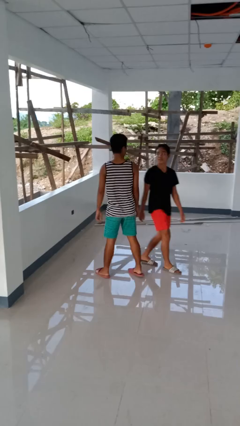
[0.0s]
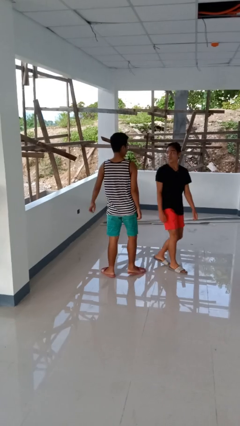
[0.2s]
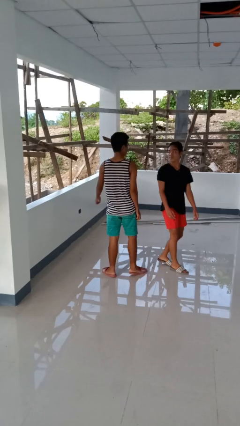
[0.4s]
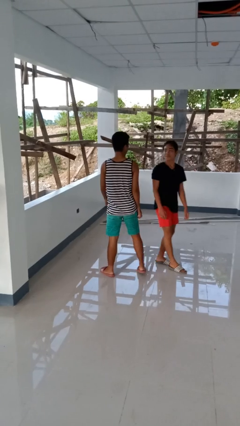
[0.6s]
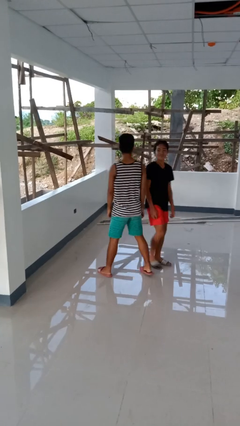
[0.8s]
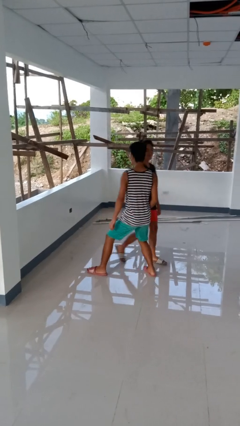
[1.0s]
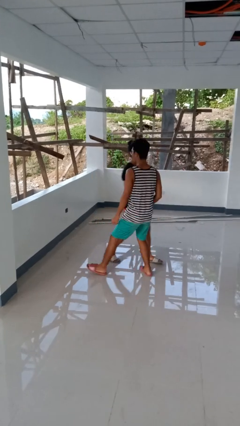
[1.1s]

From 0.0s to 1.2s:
person bumps into person

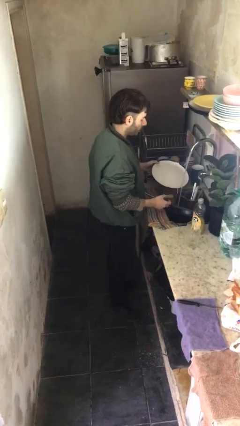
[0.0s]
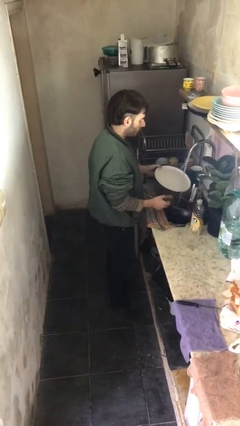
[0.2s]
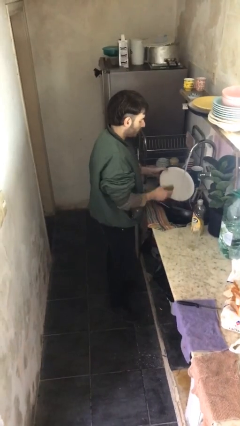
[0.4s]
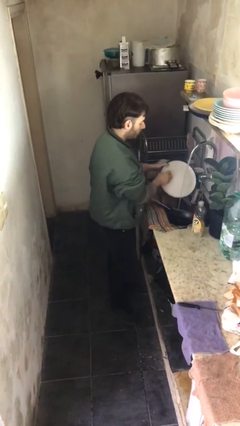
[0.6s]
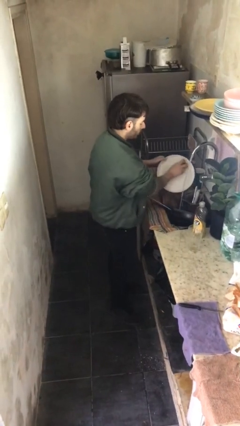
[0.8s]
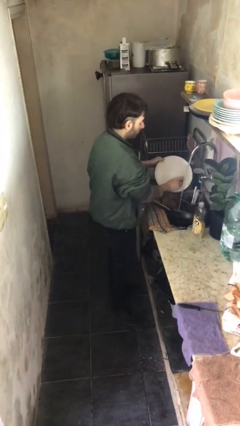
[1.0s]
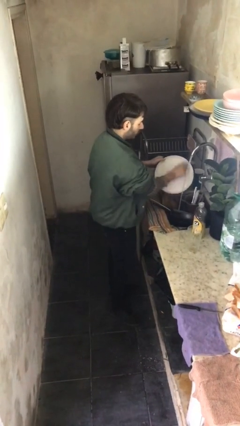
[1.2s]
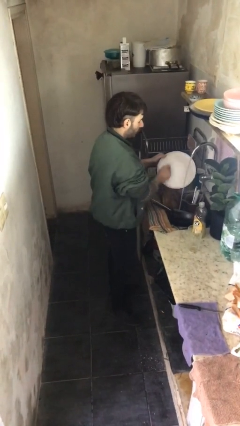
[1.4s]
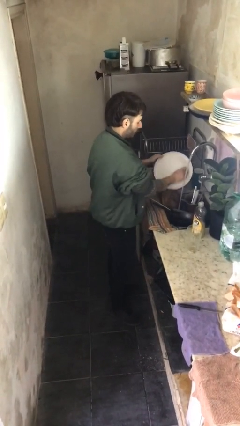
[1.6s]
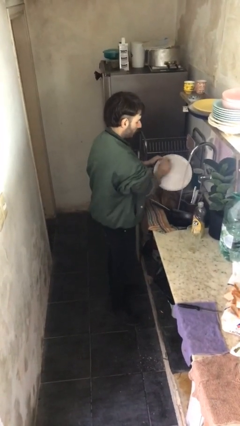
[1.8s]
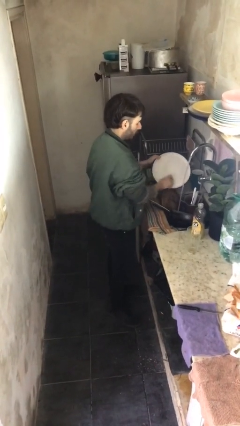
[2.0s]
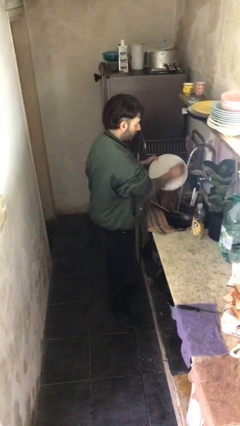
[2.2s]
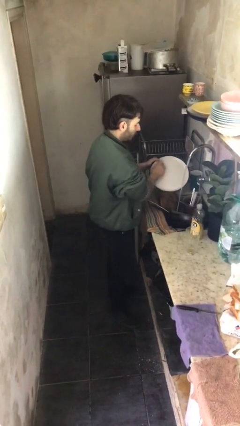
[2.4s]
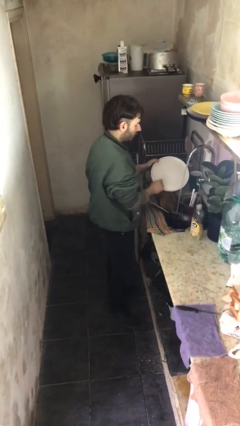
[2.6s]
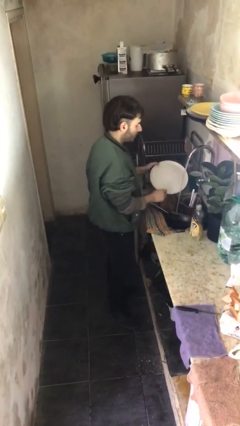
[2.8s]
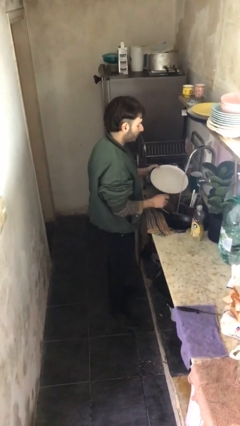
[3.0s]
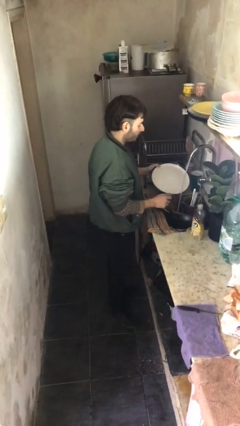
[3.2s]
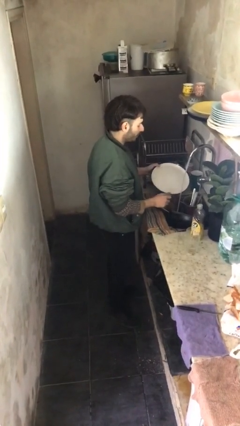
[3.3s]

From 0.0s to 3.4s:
person washes dish

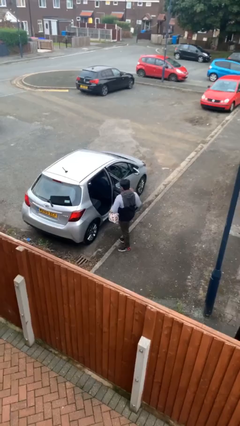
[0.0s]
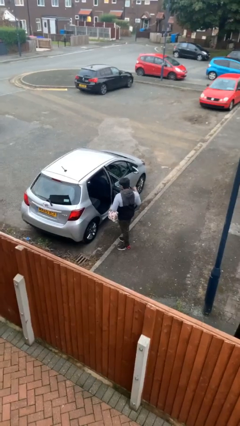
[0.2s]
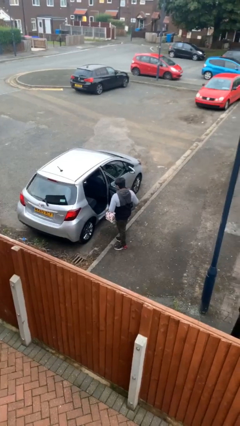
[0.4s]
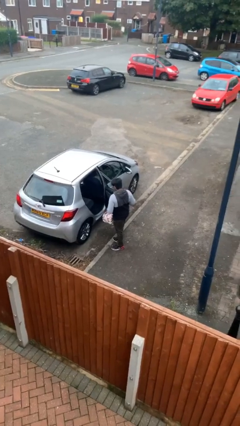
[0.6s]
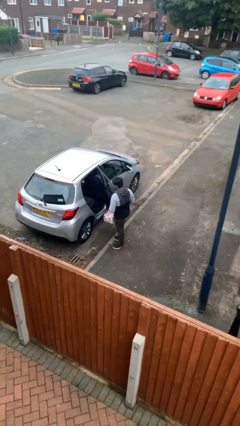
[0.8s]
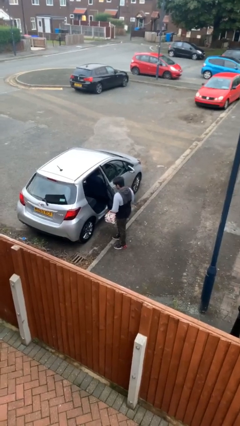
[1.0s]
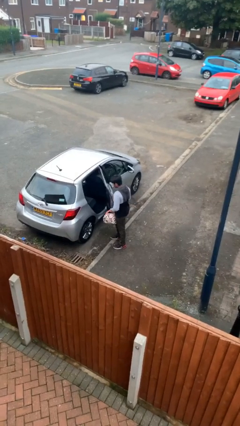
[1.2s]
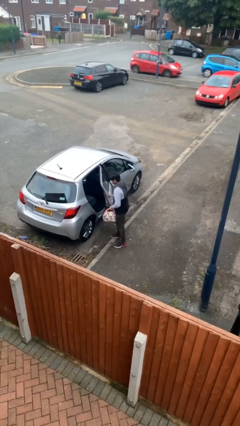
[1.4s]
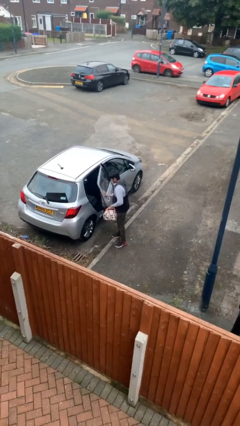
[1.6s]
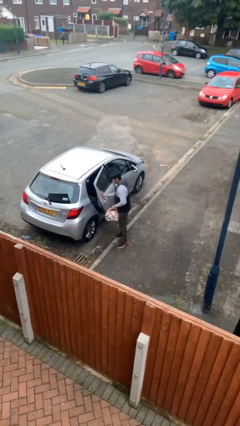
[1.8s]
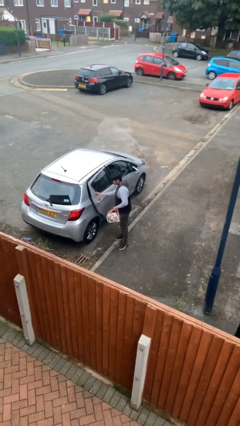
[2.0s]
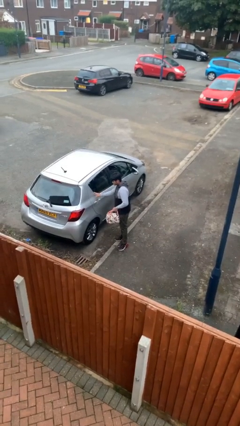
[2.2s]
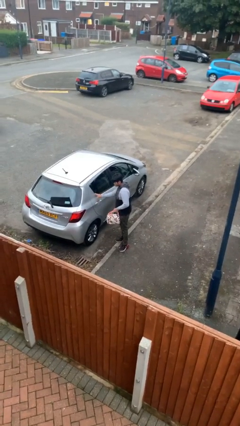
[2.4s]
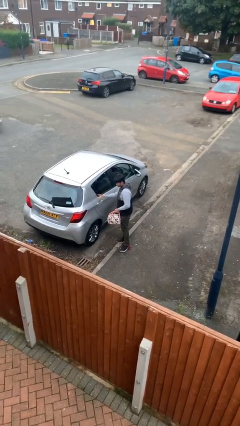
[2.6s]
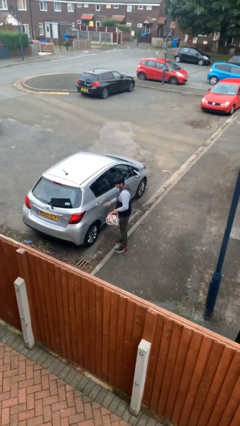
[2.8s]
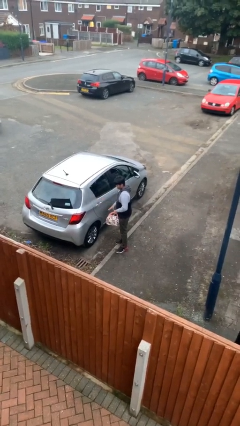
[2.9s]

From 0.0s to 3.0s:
person closes car door

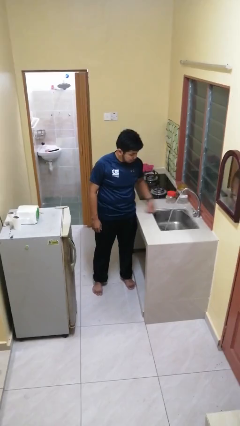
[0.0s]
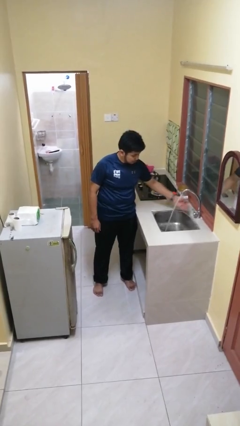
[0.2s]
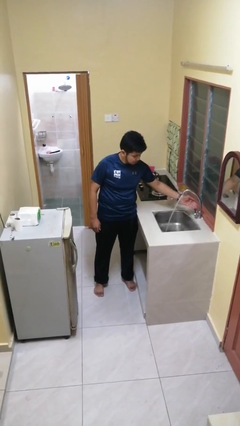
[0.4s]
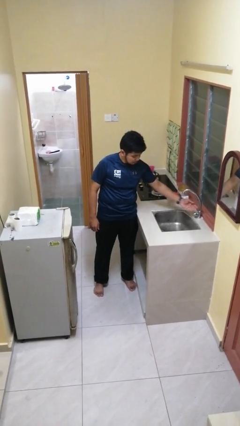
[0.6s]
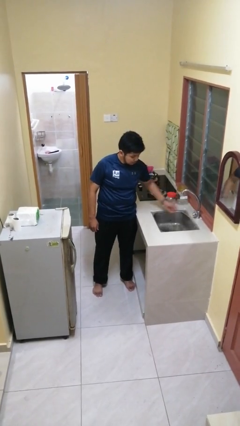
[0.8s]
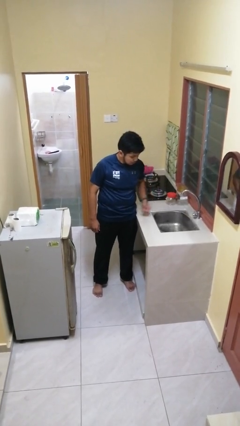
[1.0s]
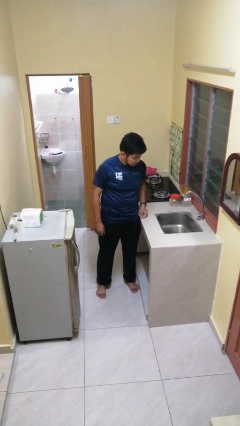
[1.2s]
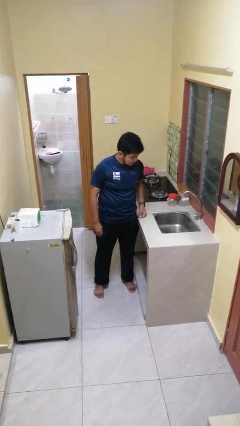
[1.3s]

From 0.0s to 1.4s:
person turns off faucet

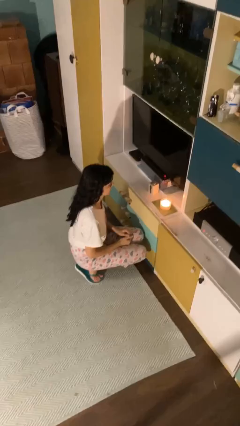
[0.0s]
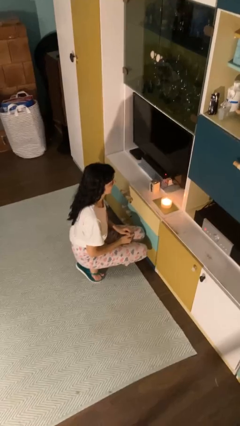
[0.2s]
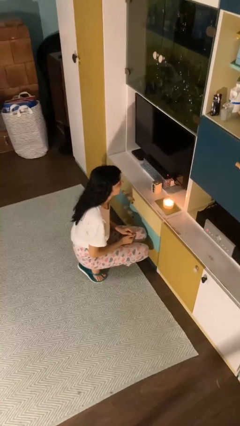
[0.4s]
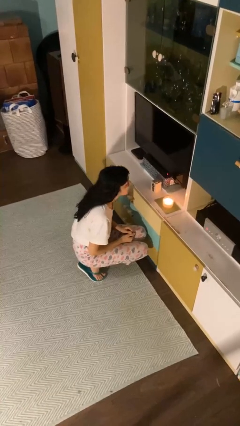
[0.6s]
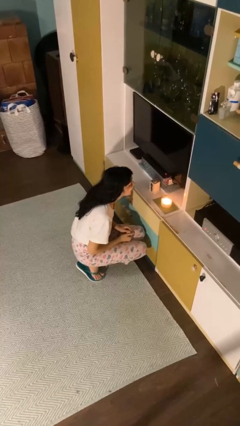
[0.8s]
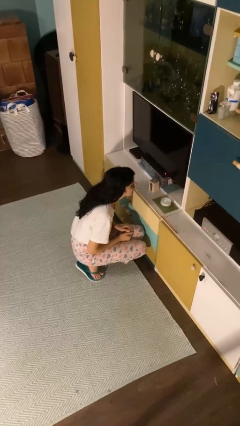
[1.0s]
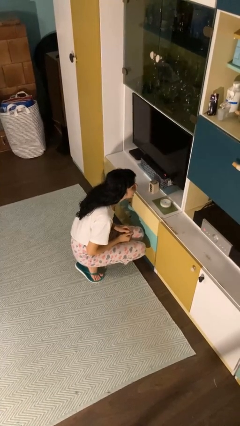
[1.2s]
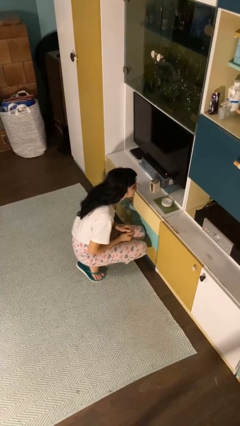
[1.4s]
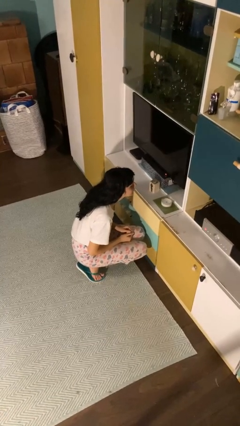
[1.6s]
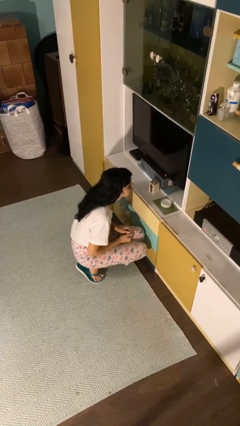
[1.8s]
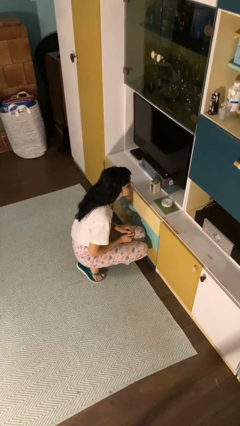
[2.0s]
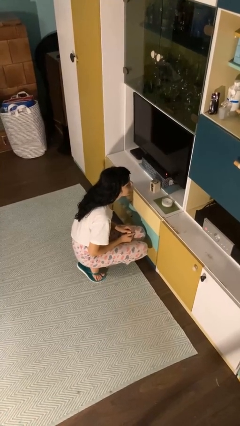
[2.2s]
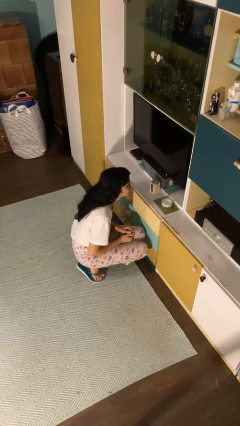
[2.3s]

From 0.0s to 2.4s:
person extinguishes candle

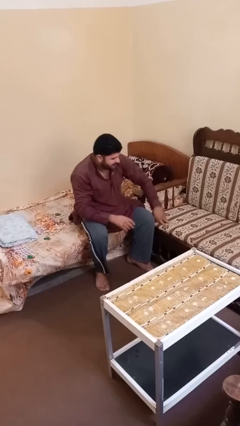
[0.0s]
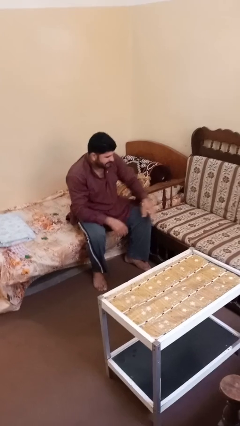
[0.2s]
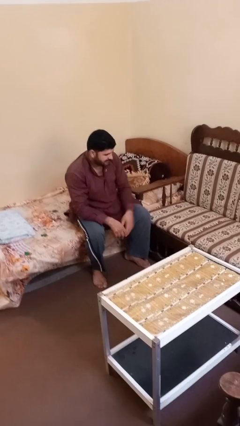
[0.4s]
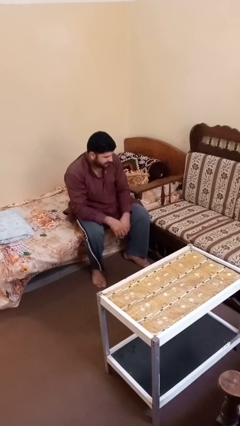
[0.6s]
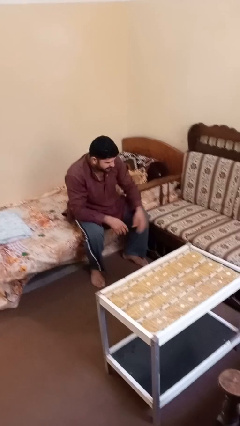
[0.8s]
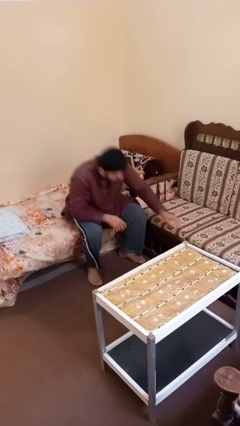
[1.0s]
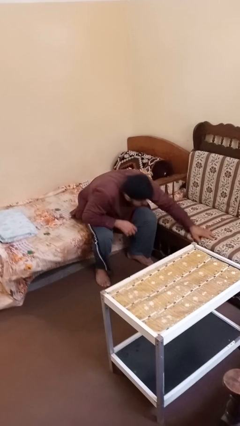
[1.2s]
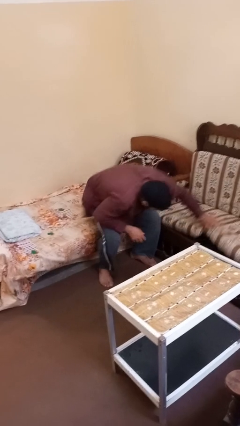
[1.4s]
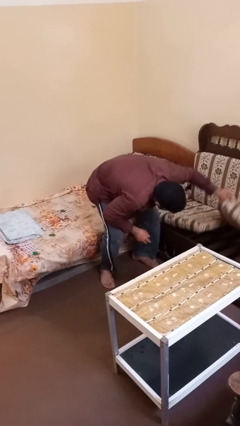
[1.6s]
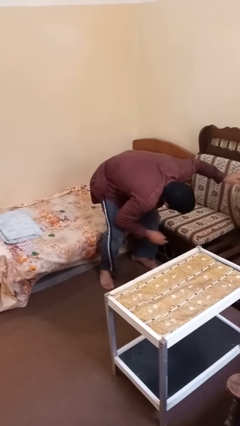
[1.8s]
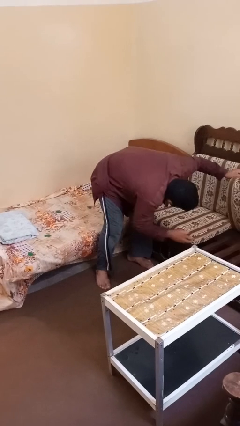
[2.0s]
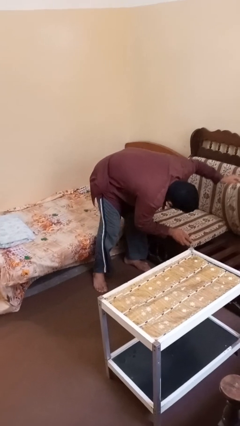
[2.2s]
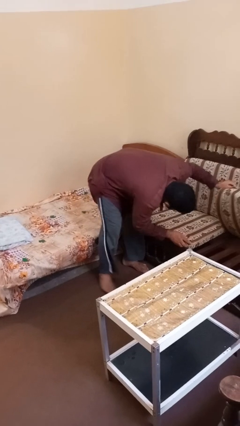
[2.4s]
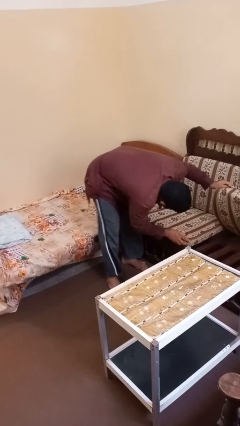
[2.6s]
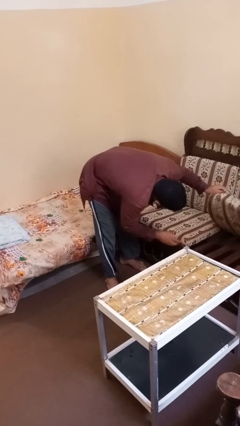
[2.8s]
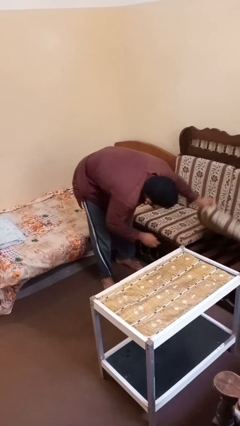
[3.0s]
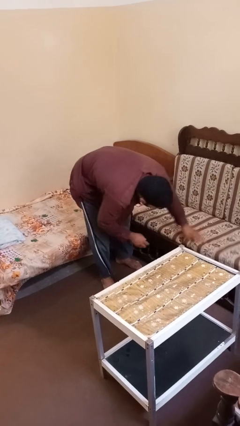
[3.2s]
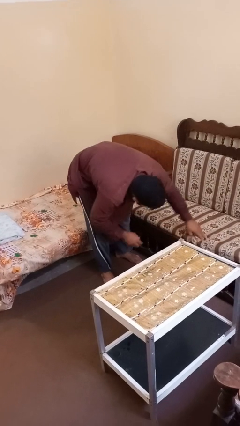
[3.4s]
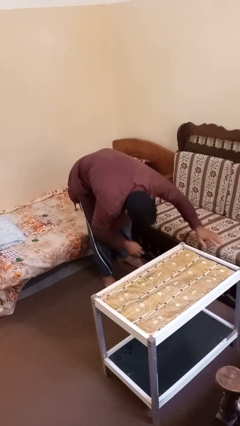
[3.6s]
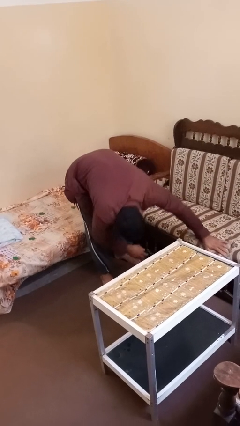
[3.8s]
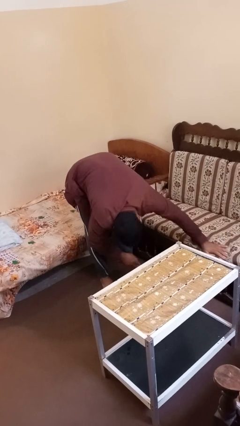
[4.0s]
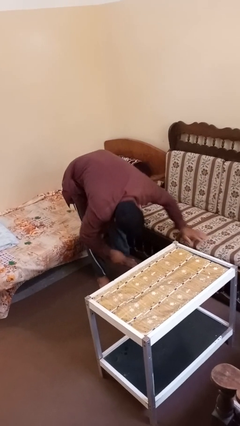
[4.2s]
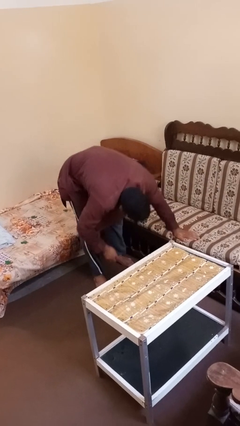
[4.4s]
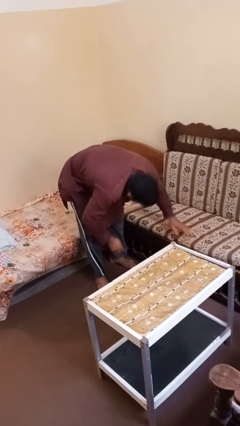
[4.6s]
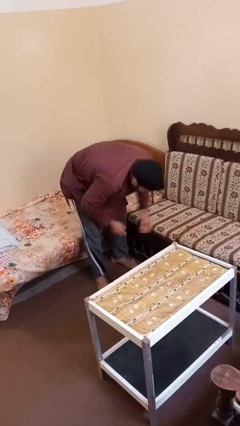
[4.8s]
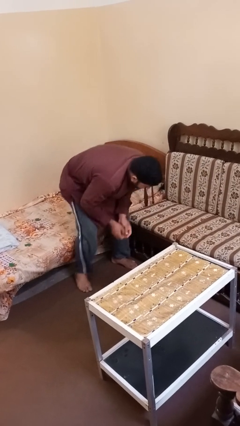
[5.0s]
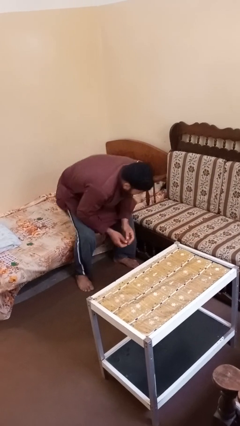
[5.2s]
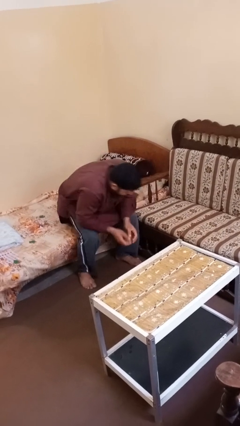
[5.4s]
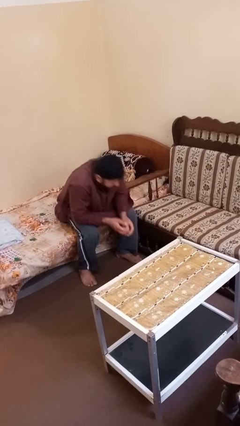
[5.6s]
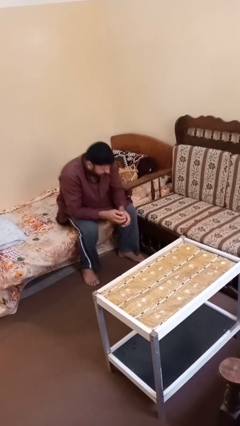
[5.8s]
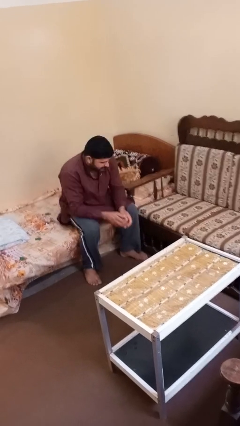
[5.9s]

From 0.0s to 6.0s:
person searches under couch
